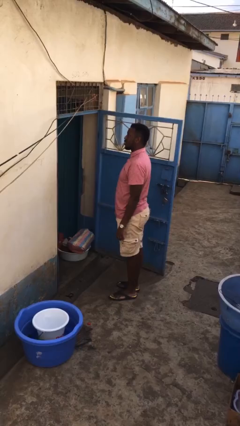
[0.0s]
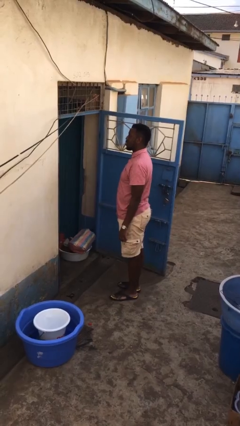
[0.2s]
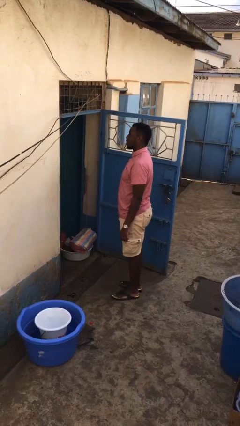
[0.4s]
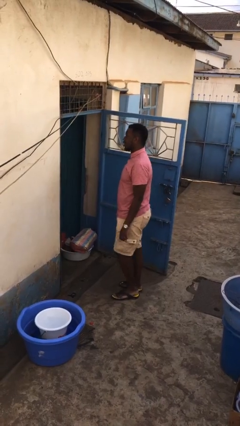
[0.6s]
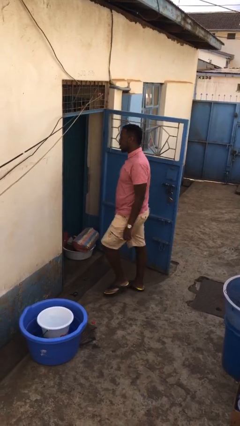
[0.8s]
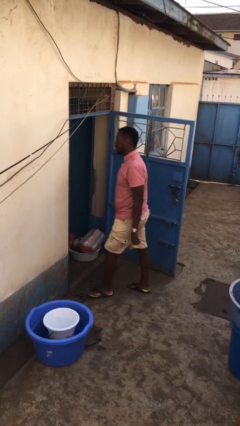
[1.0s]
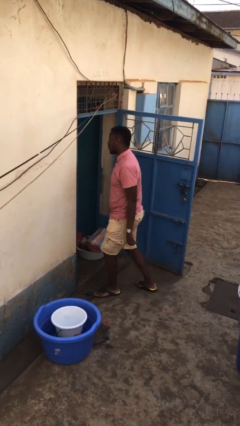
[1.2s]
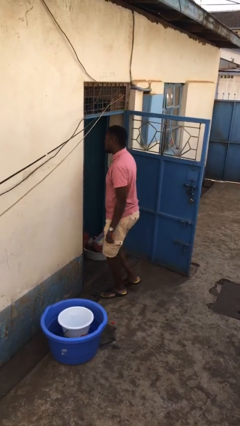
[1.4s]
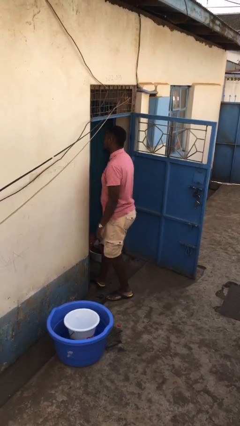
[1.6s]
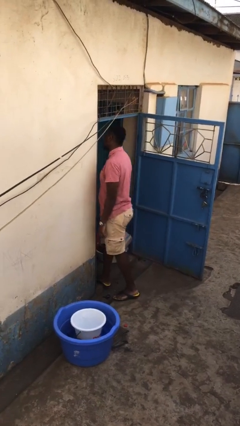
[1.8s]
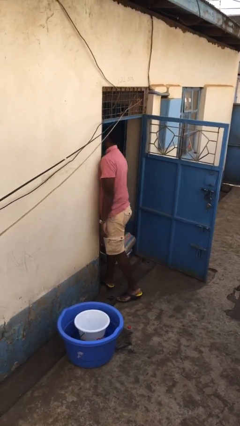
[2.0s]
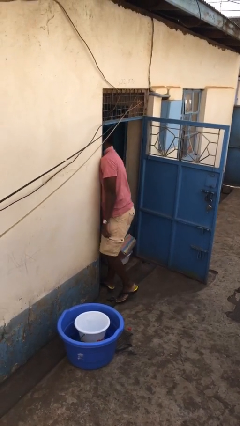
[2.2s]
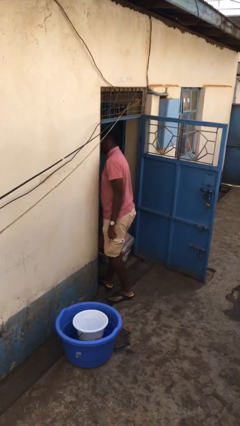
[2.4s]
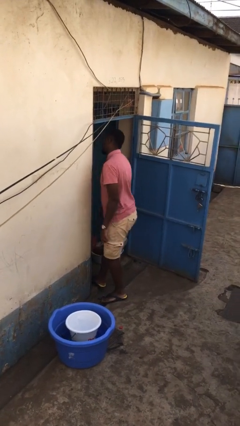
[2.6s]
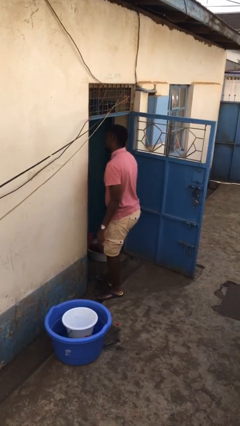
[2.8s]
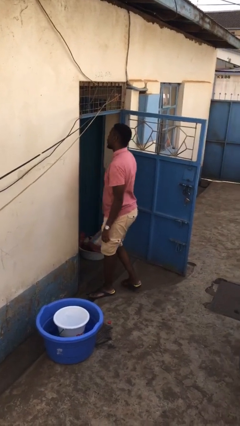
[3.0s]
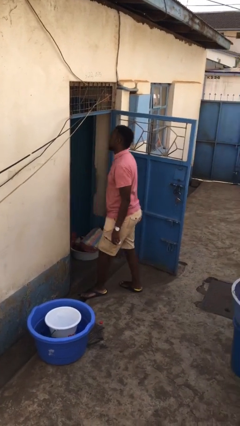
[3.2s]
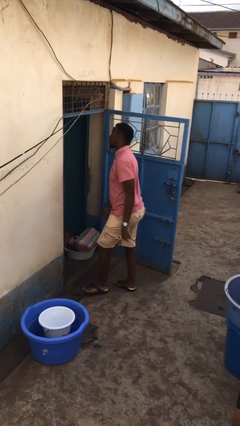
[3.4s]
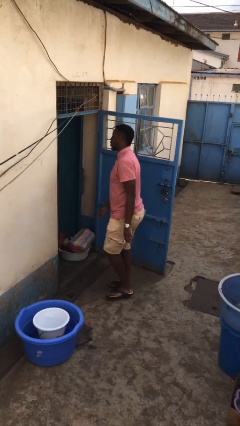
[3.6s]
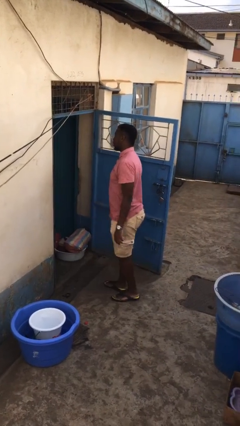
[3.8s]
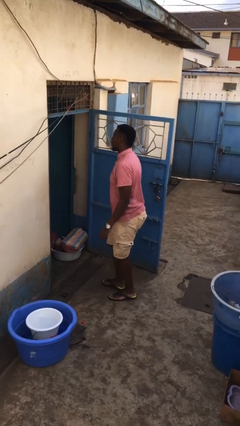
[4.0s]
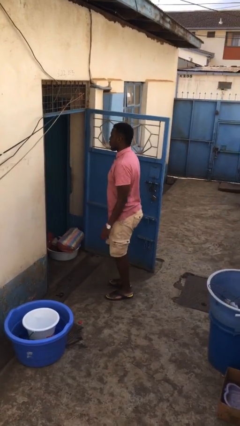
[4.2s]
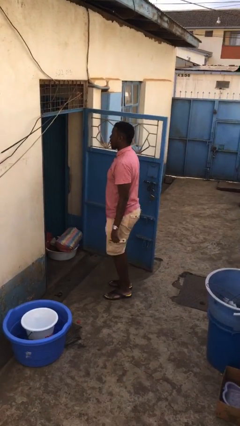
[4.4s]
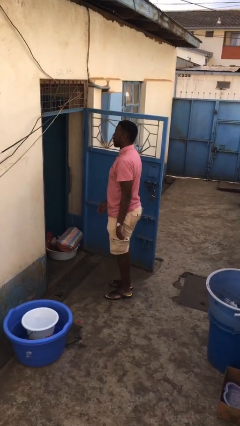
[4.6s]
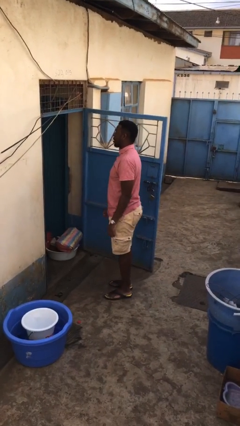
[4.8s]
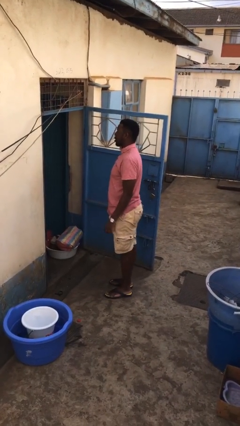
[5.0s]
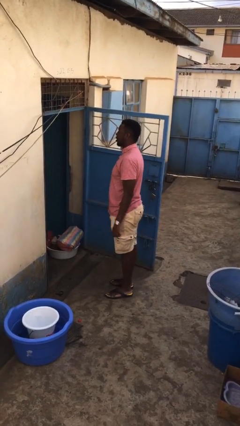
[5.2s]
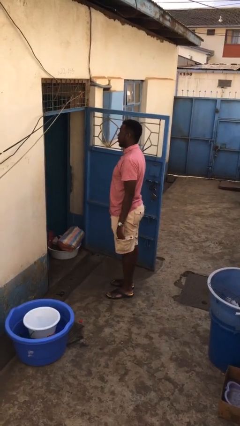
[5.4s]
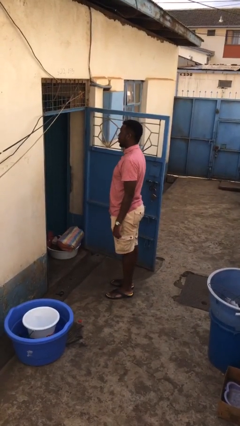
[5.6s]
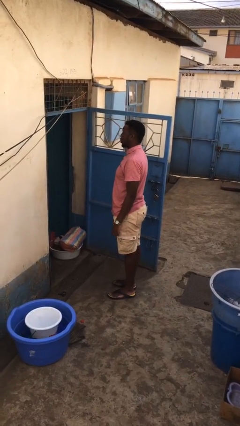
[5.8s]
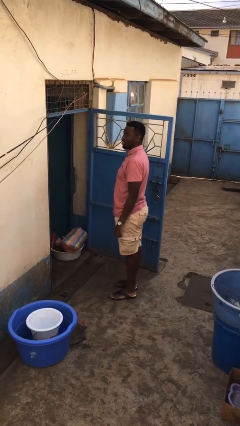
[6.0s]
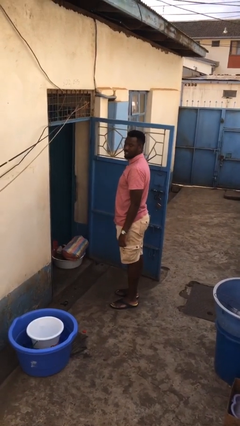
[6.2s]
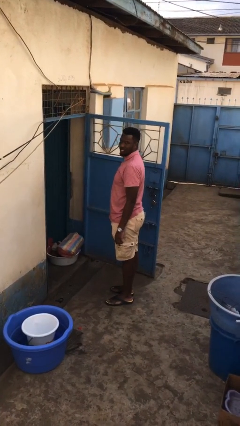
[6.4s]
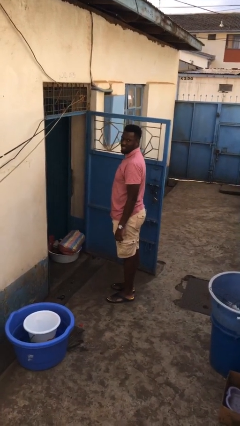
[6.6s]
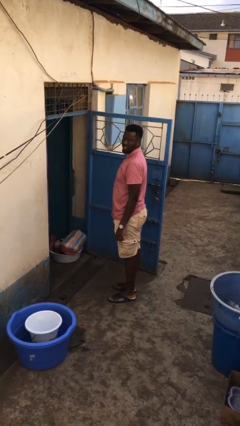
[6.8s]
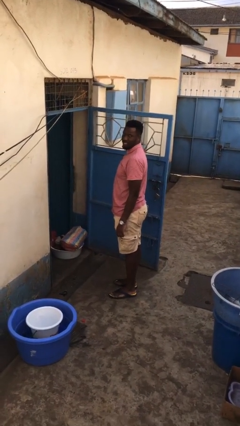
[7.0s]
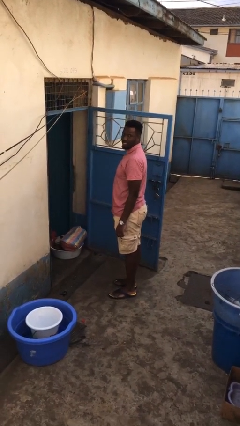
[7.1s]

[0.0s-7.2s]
person bumps into wall

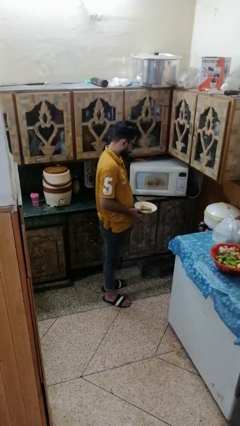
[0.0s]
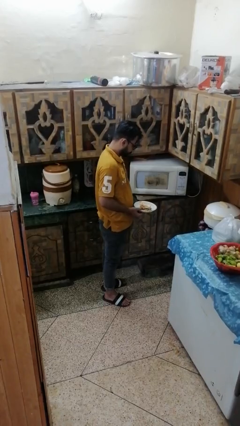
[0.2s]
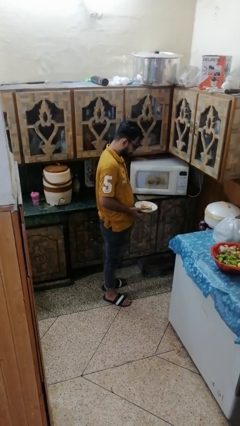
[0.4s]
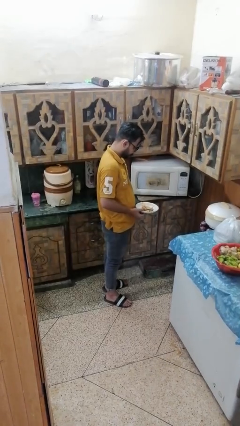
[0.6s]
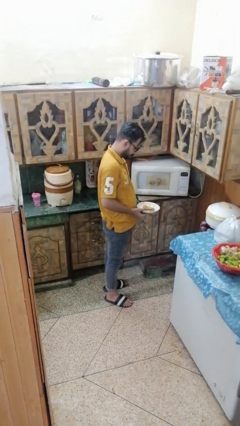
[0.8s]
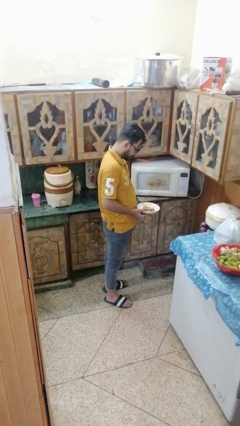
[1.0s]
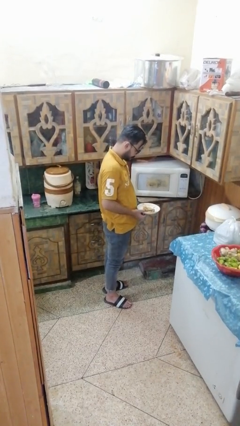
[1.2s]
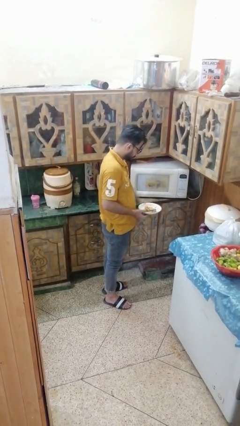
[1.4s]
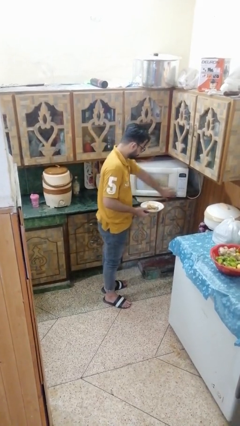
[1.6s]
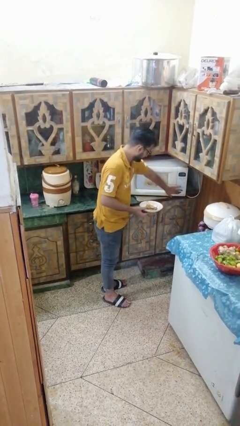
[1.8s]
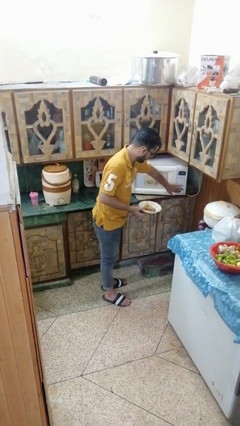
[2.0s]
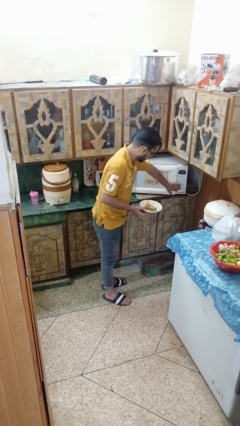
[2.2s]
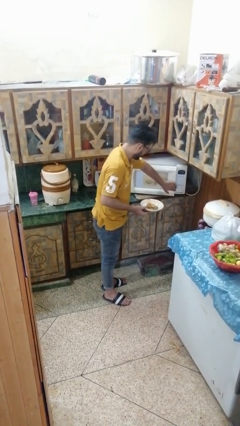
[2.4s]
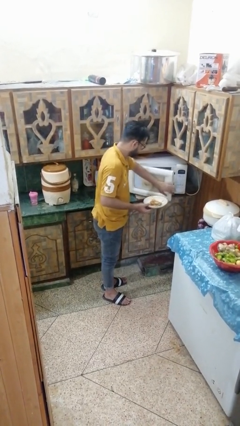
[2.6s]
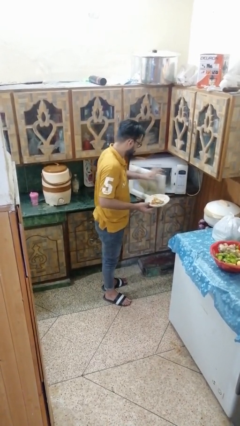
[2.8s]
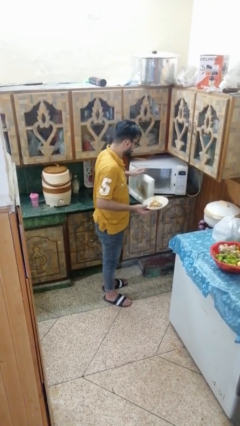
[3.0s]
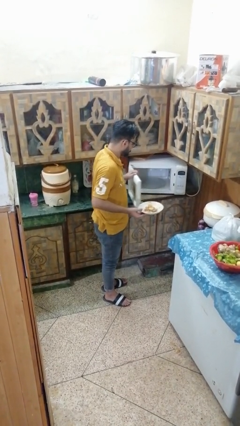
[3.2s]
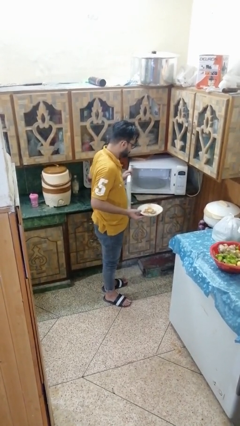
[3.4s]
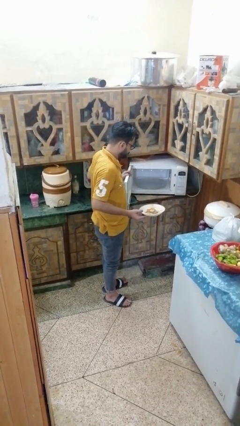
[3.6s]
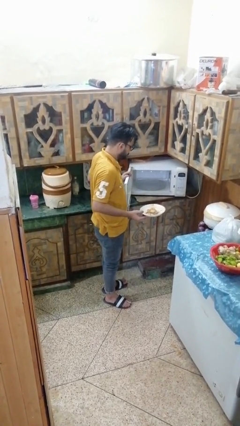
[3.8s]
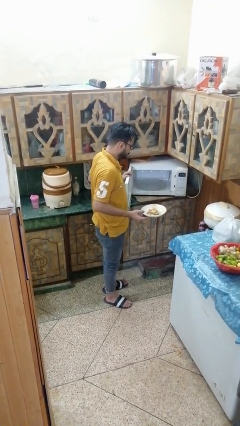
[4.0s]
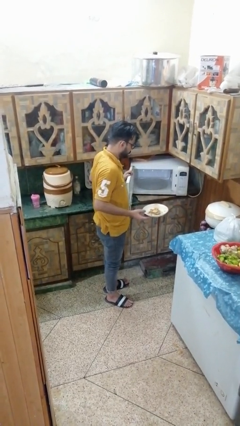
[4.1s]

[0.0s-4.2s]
person opens microwave

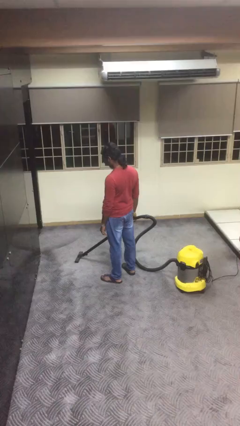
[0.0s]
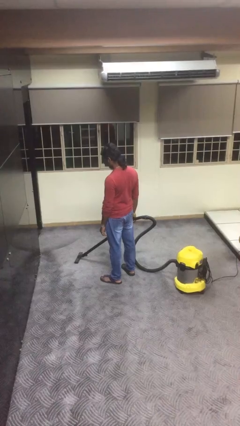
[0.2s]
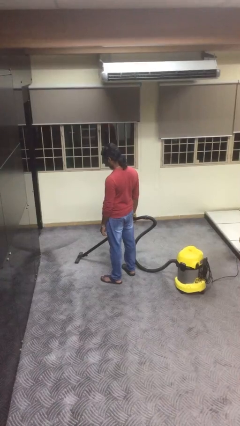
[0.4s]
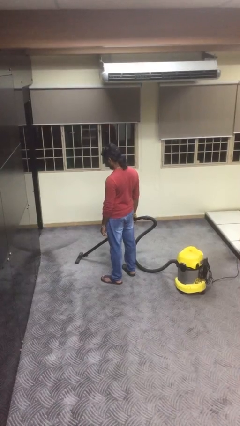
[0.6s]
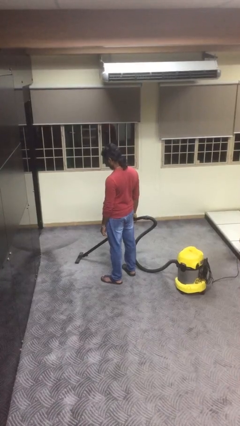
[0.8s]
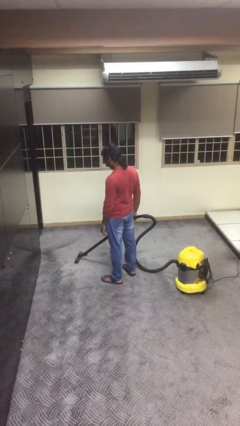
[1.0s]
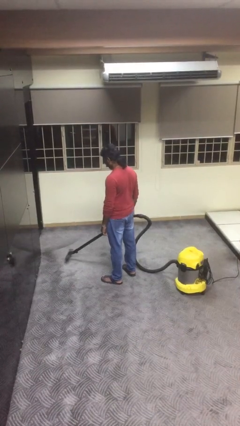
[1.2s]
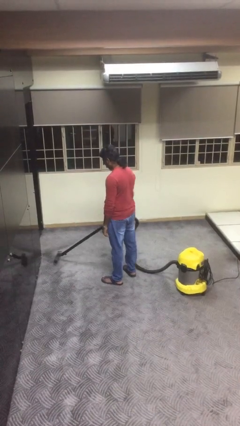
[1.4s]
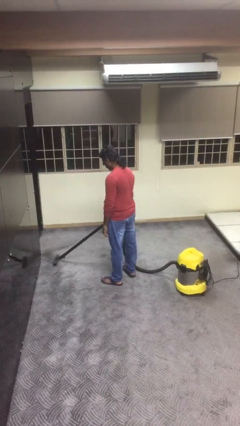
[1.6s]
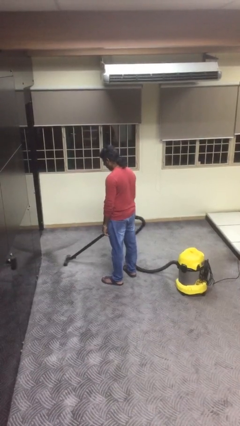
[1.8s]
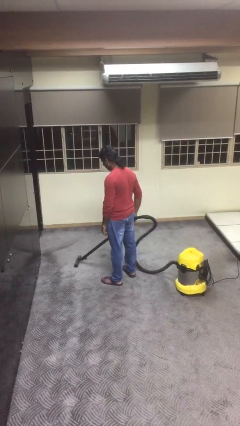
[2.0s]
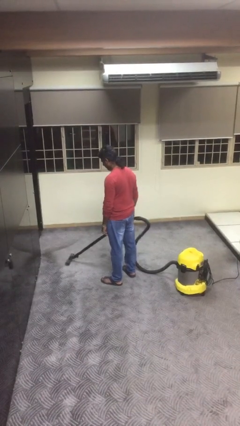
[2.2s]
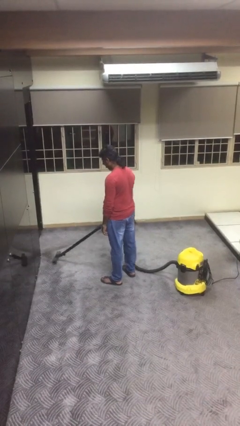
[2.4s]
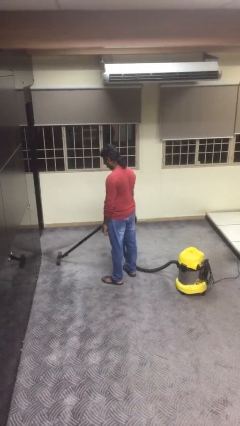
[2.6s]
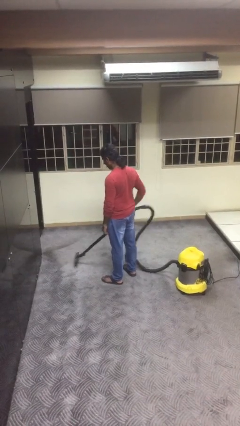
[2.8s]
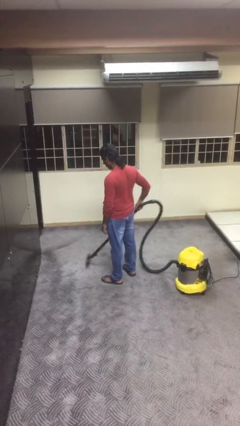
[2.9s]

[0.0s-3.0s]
person vacuums carpet

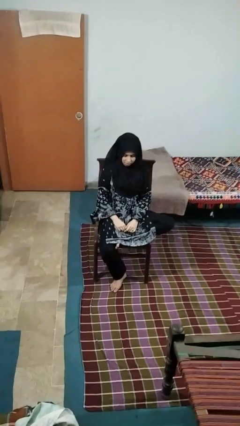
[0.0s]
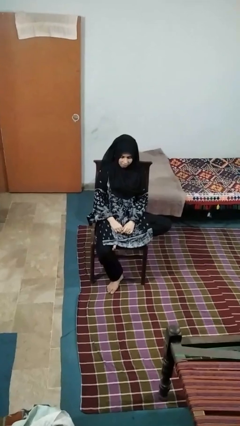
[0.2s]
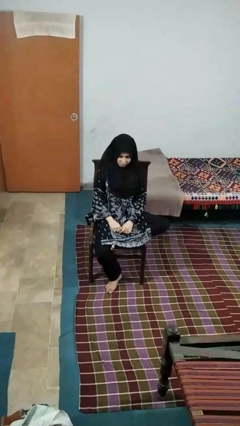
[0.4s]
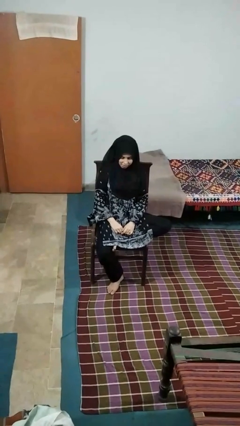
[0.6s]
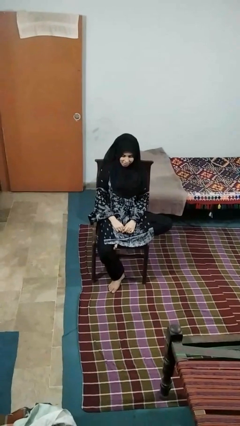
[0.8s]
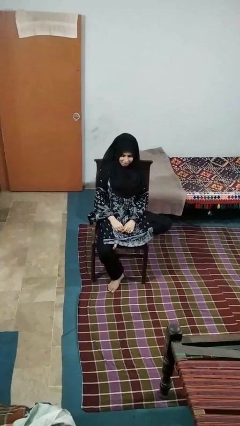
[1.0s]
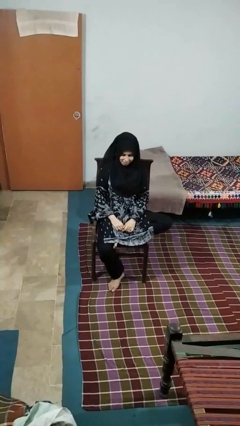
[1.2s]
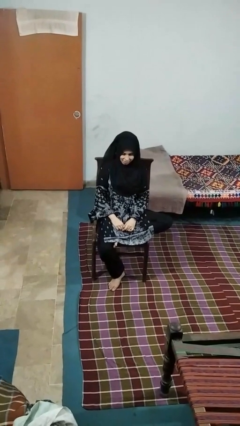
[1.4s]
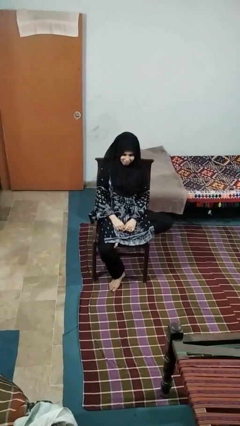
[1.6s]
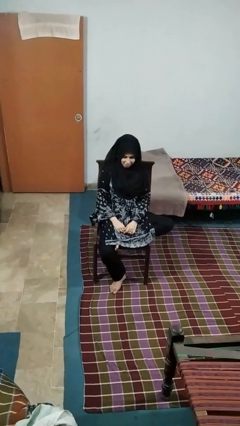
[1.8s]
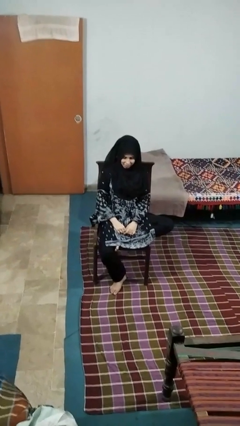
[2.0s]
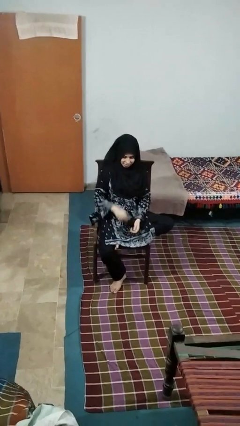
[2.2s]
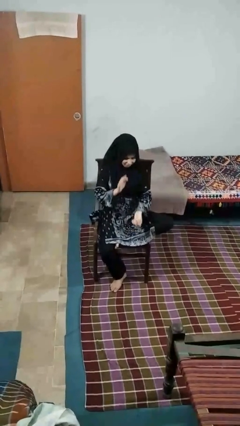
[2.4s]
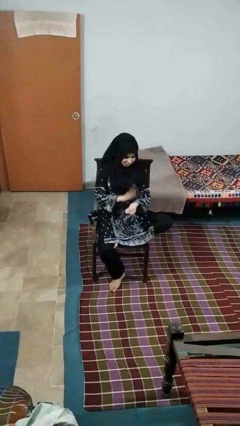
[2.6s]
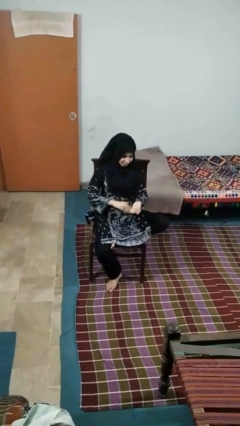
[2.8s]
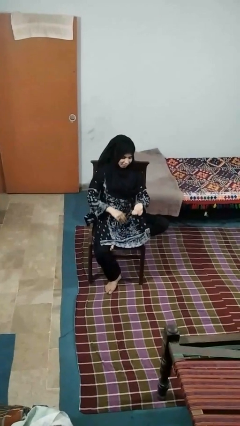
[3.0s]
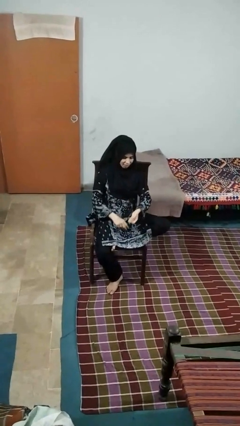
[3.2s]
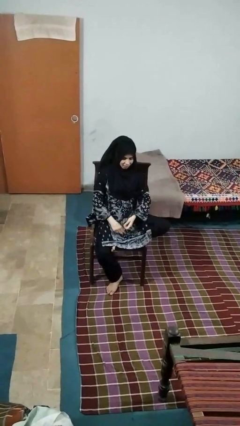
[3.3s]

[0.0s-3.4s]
person swats bug
